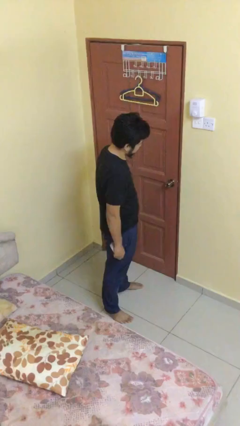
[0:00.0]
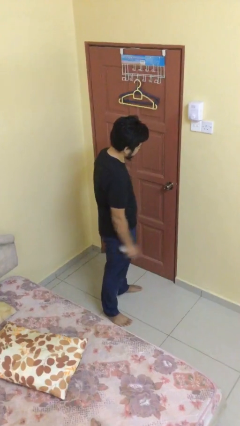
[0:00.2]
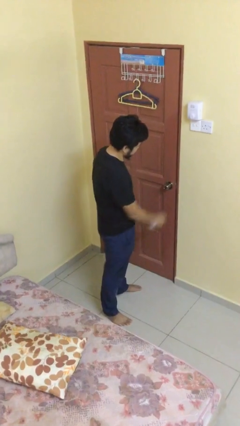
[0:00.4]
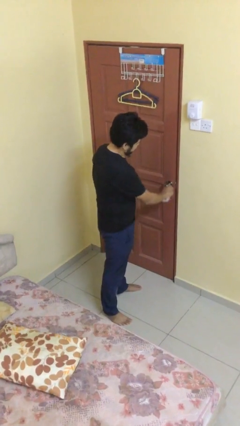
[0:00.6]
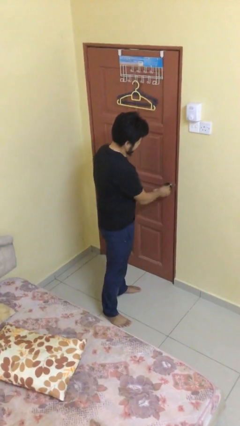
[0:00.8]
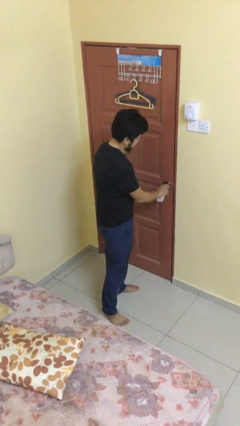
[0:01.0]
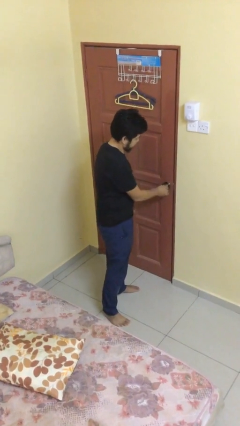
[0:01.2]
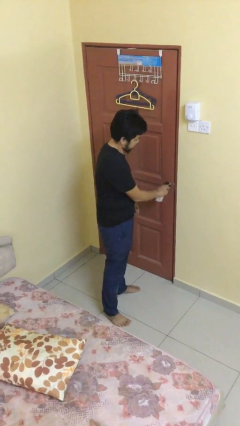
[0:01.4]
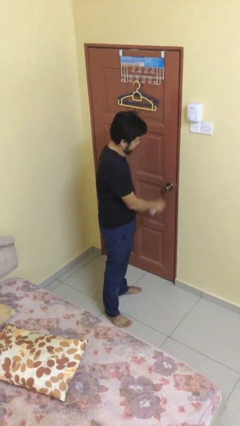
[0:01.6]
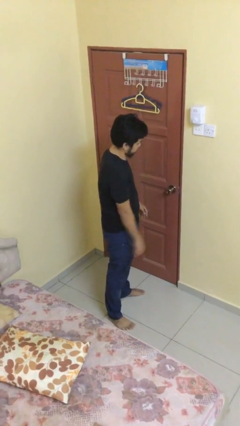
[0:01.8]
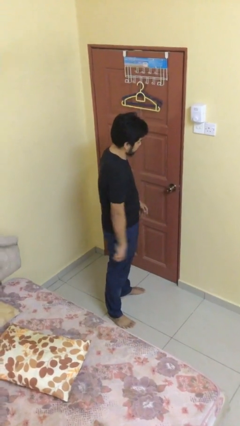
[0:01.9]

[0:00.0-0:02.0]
person unlocks door with keys

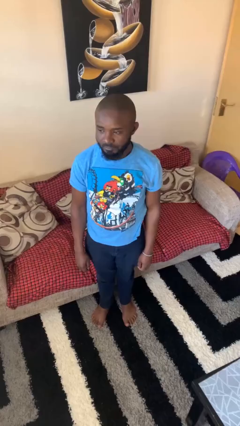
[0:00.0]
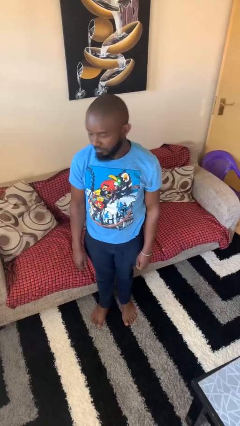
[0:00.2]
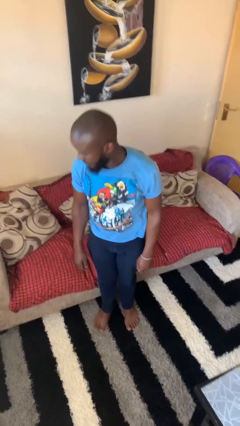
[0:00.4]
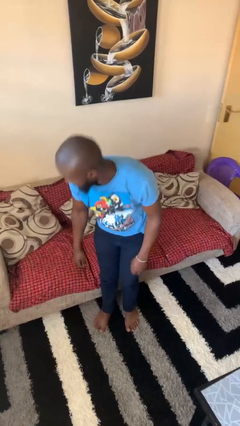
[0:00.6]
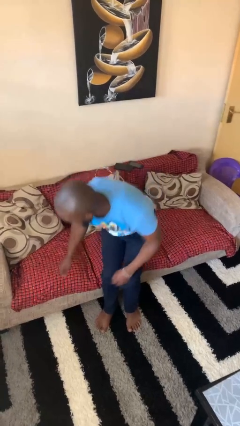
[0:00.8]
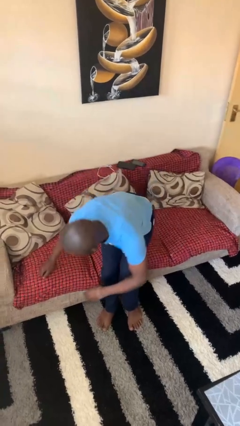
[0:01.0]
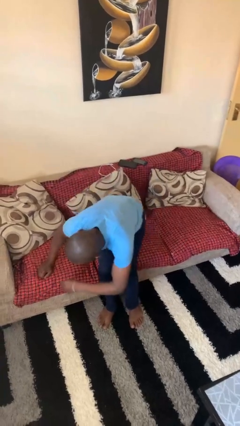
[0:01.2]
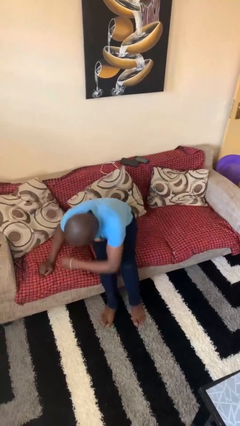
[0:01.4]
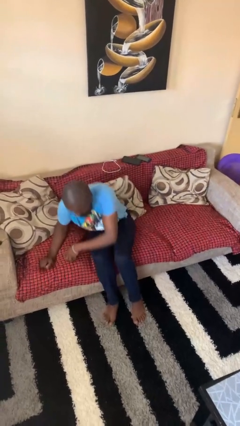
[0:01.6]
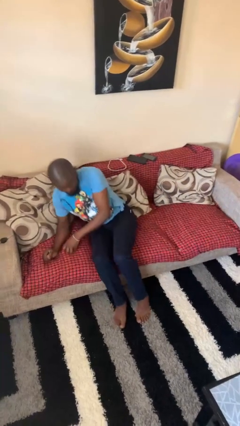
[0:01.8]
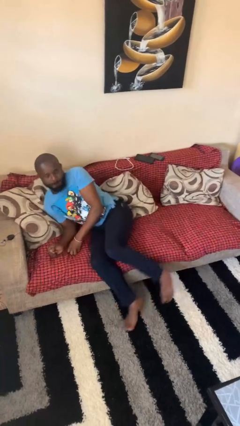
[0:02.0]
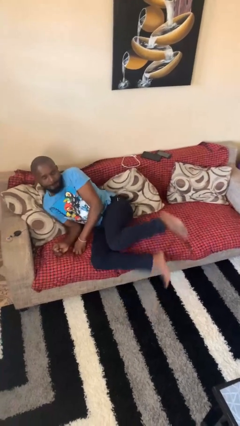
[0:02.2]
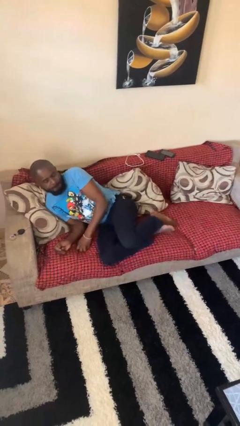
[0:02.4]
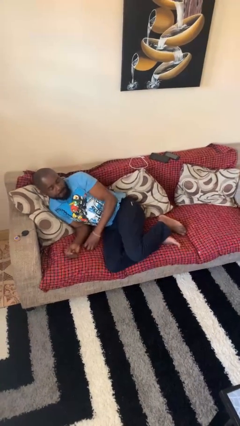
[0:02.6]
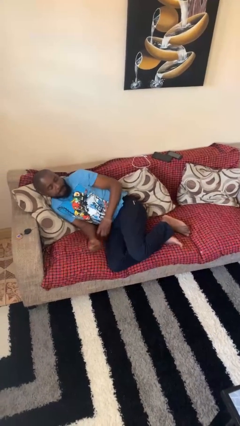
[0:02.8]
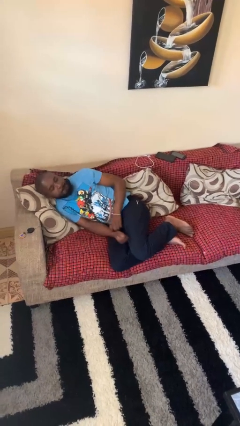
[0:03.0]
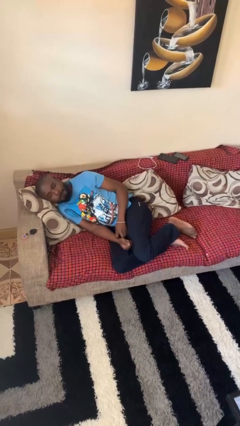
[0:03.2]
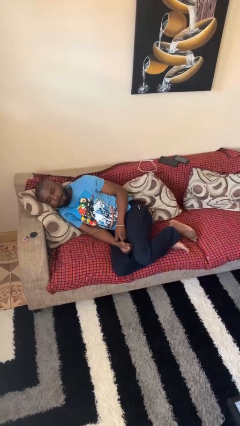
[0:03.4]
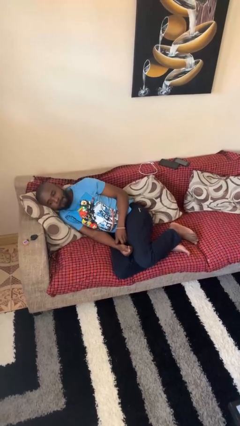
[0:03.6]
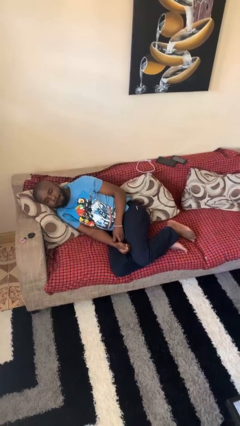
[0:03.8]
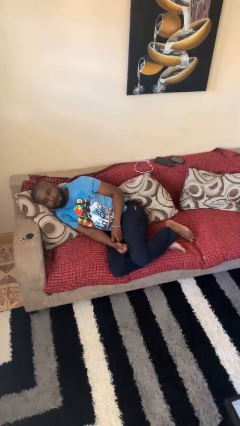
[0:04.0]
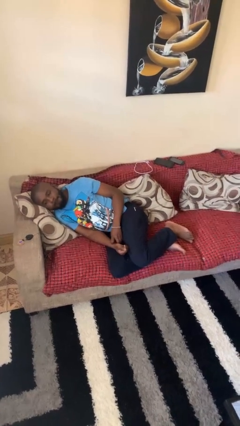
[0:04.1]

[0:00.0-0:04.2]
person lies down on couch

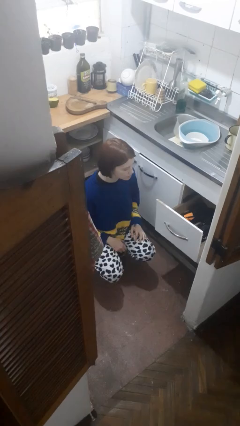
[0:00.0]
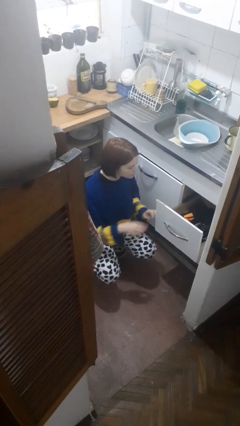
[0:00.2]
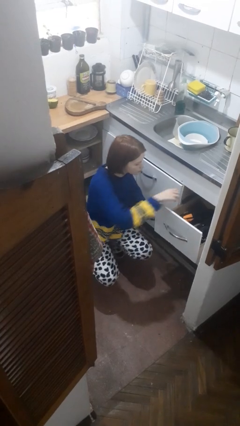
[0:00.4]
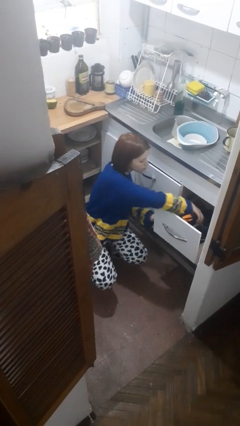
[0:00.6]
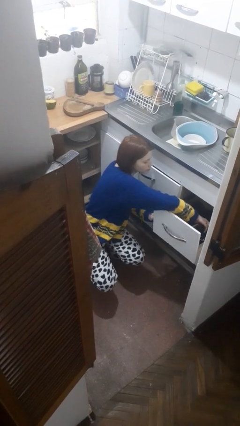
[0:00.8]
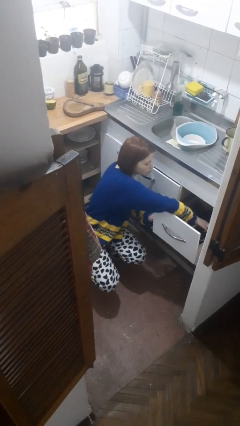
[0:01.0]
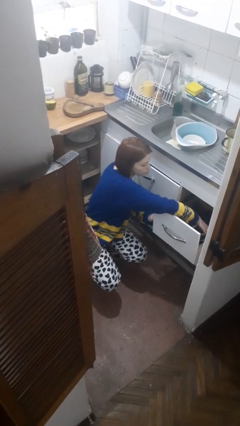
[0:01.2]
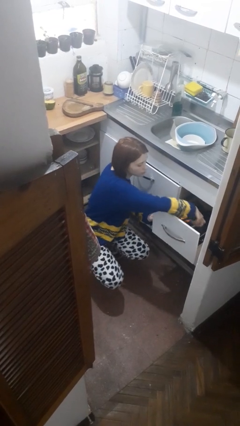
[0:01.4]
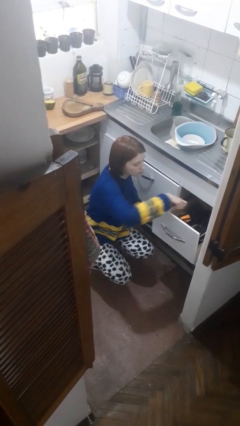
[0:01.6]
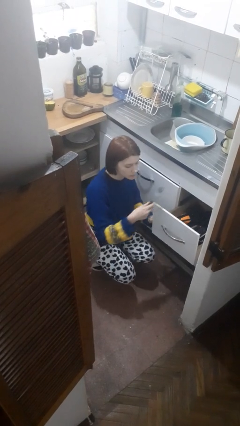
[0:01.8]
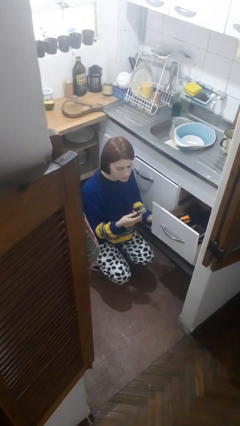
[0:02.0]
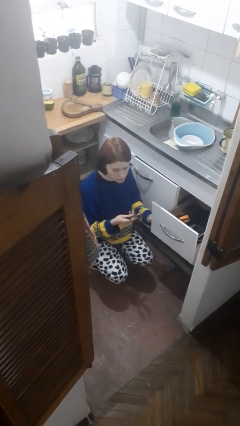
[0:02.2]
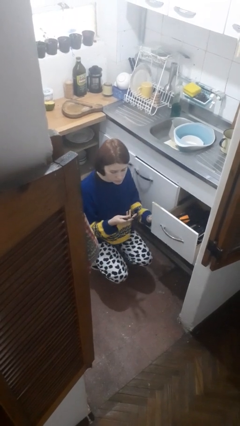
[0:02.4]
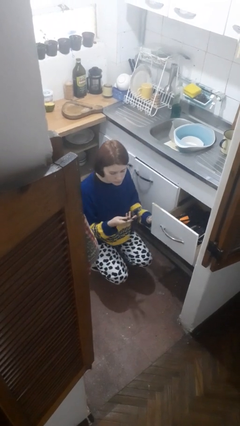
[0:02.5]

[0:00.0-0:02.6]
person takes object from kitchen drawer

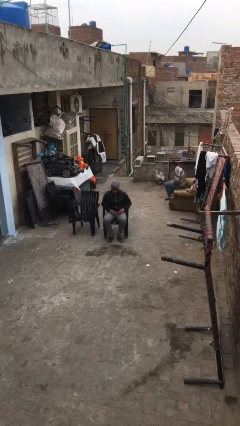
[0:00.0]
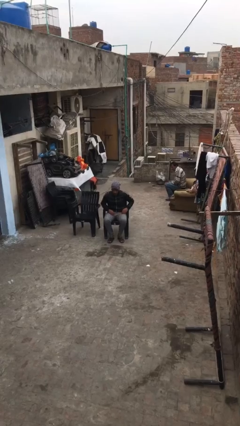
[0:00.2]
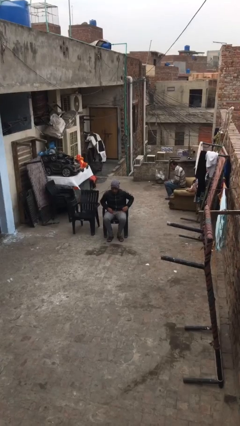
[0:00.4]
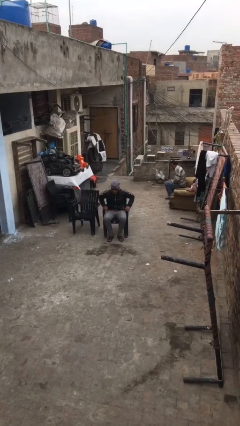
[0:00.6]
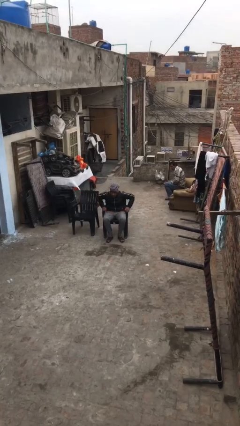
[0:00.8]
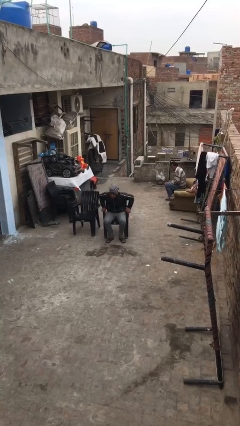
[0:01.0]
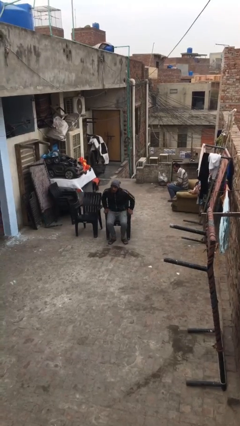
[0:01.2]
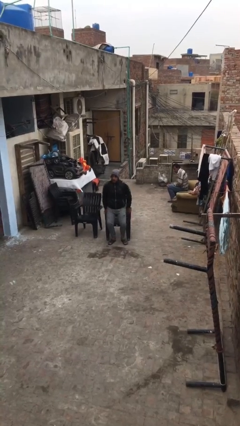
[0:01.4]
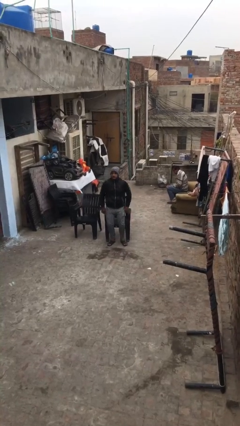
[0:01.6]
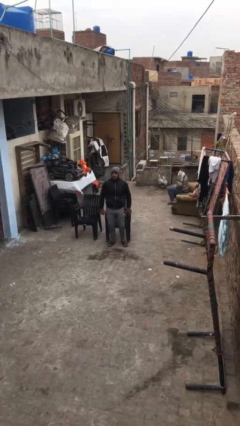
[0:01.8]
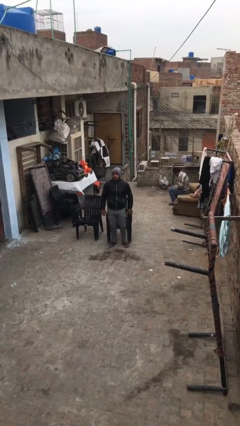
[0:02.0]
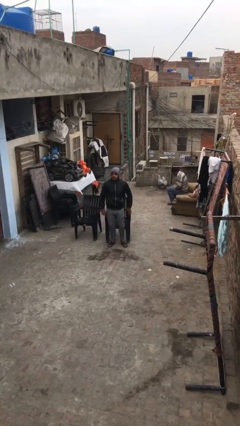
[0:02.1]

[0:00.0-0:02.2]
person stands up

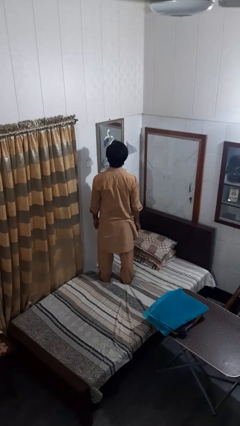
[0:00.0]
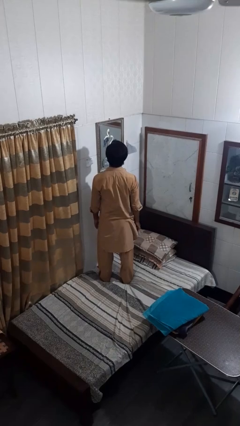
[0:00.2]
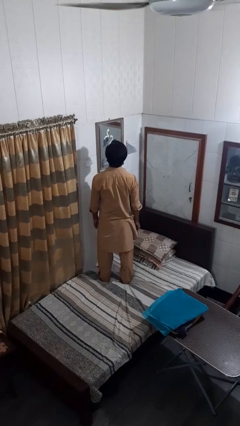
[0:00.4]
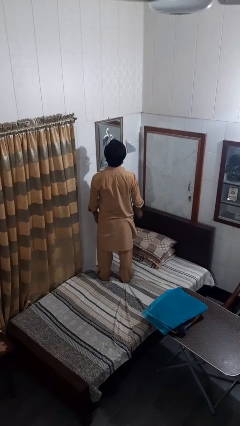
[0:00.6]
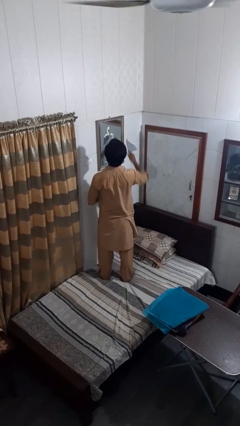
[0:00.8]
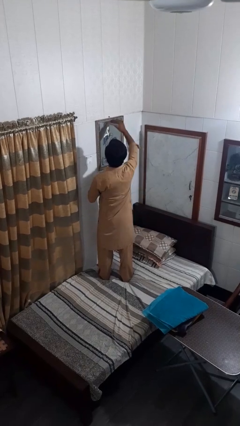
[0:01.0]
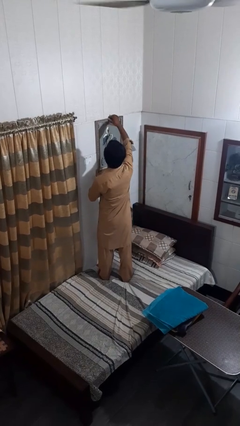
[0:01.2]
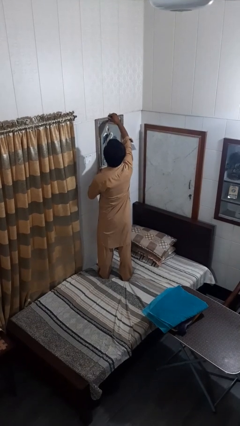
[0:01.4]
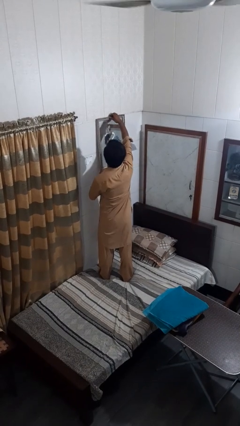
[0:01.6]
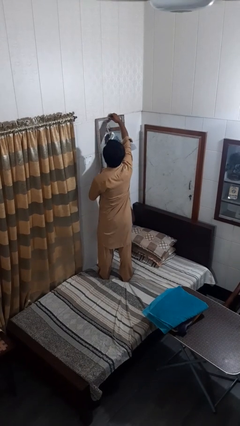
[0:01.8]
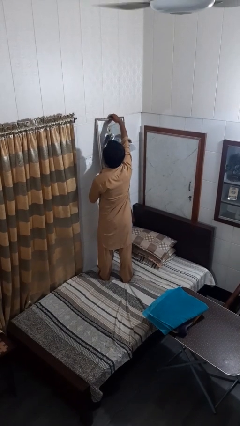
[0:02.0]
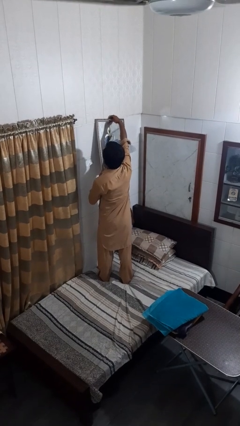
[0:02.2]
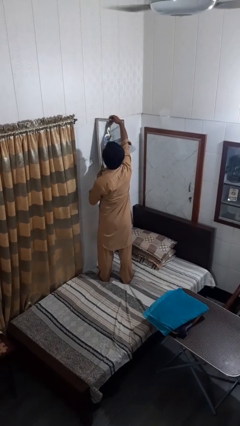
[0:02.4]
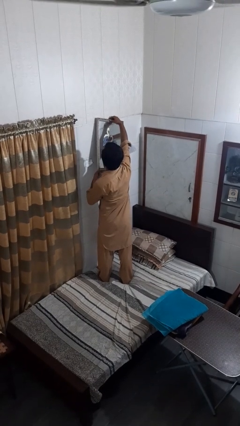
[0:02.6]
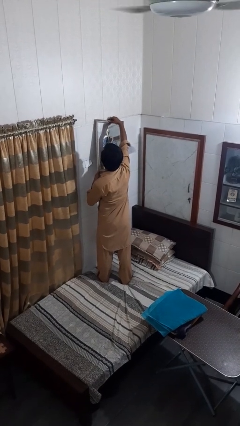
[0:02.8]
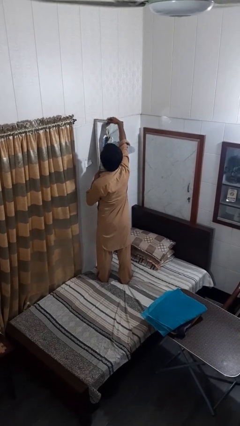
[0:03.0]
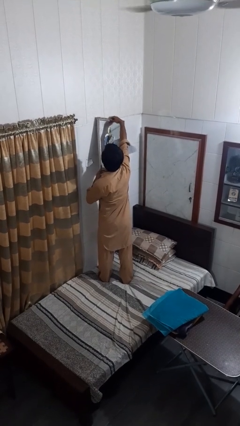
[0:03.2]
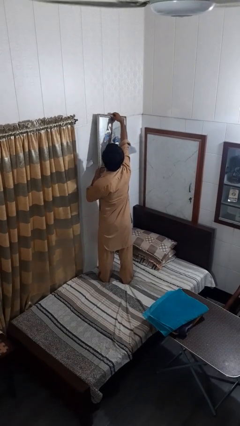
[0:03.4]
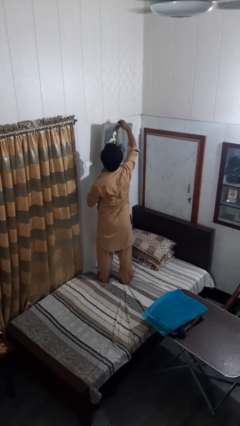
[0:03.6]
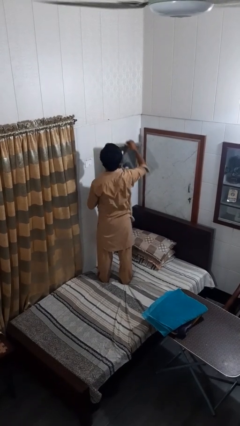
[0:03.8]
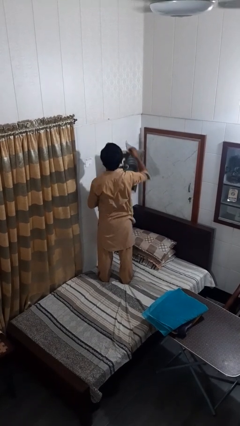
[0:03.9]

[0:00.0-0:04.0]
person takes down picture frame

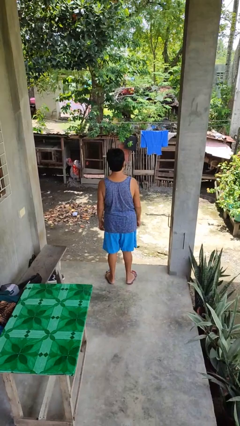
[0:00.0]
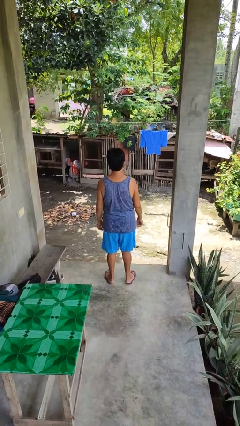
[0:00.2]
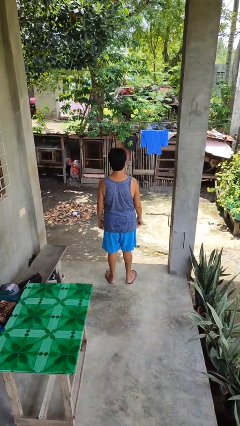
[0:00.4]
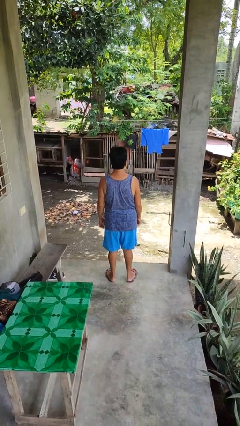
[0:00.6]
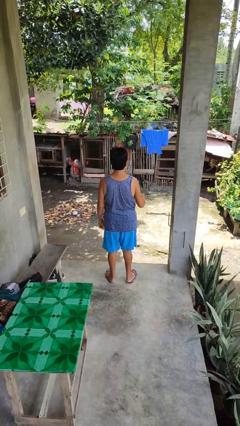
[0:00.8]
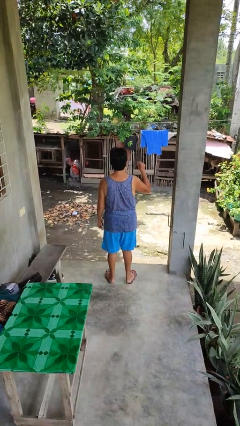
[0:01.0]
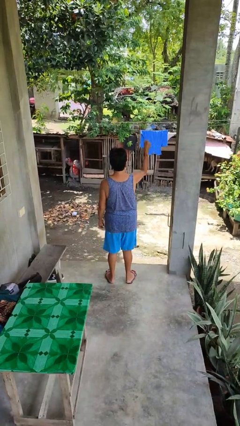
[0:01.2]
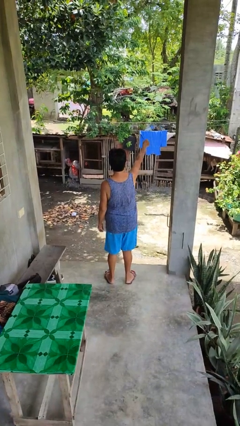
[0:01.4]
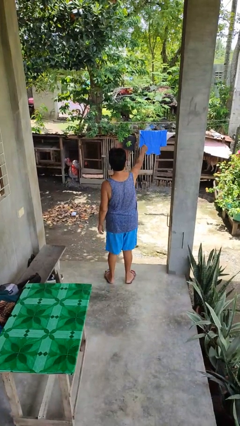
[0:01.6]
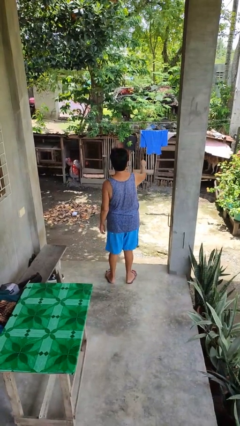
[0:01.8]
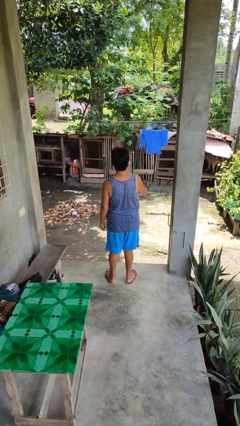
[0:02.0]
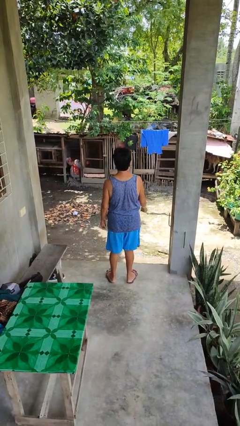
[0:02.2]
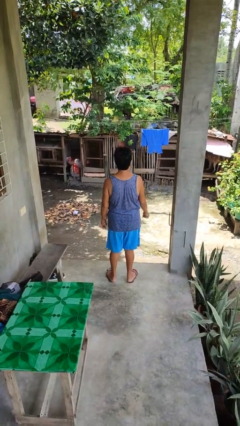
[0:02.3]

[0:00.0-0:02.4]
person punches
